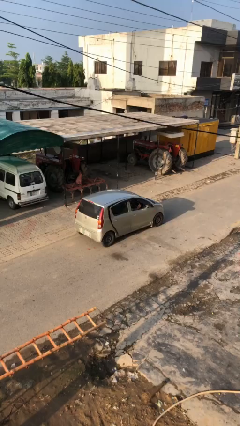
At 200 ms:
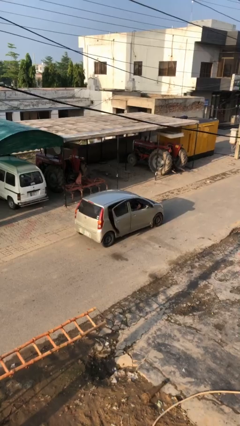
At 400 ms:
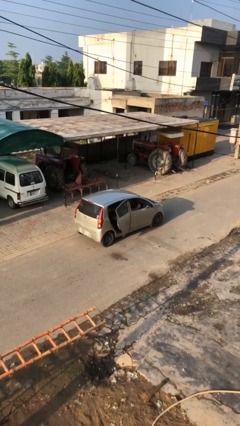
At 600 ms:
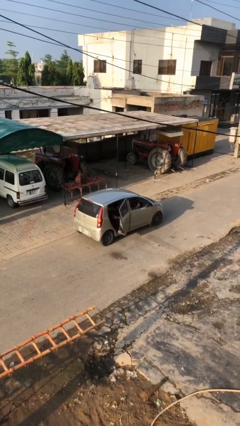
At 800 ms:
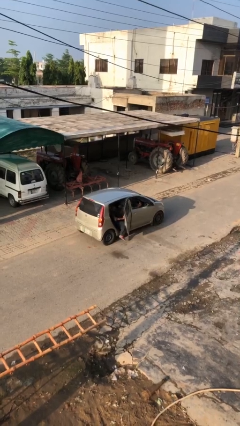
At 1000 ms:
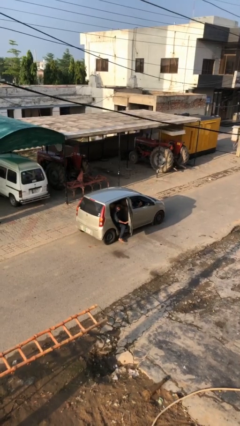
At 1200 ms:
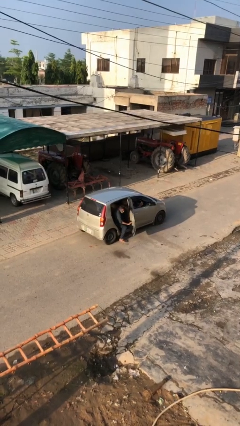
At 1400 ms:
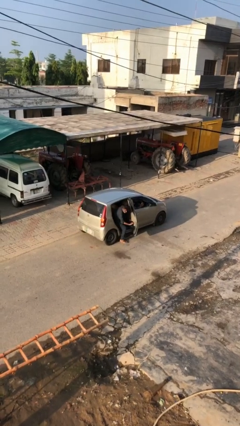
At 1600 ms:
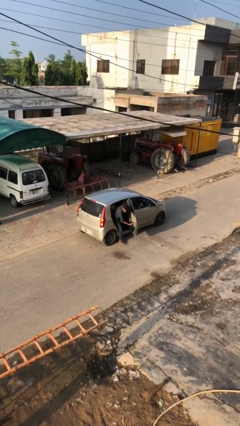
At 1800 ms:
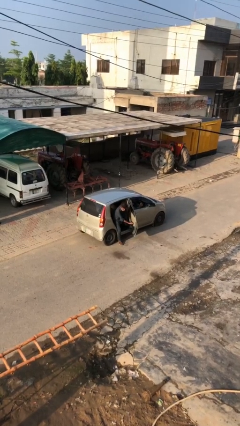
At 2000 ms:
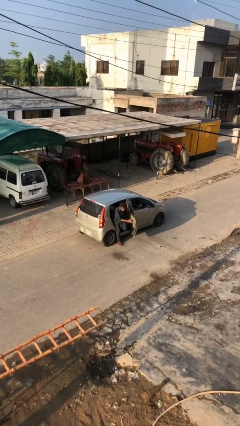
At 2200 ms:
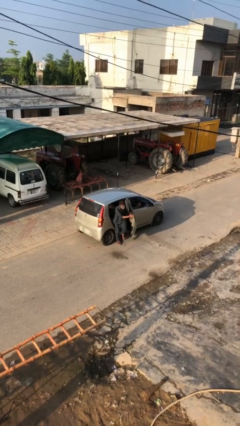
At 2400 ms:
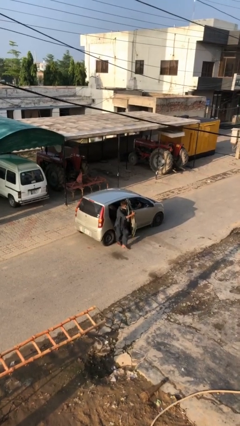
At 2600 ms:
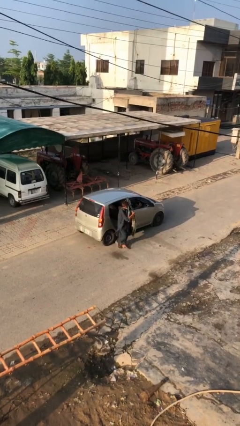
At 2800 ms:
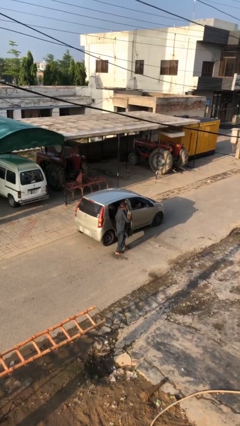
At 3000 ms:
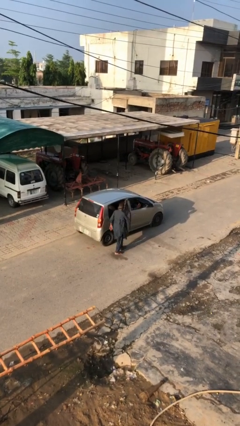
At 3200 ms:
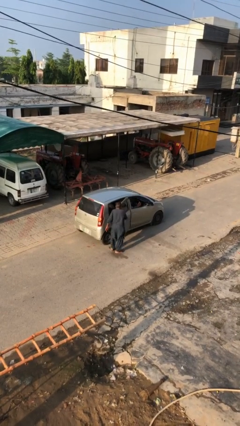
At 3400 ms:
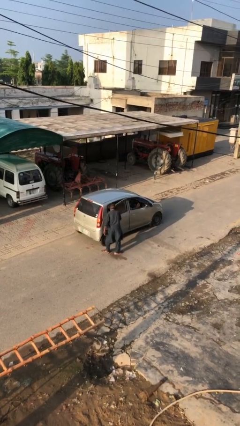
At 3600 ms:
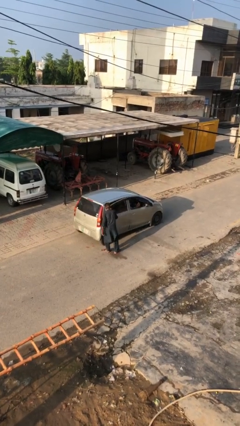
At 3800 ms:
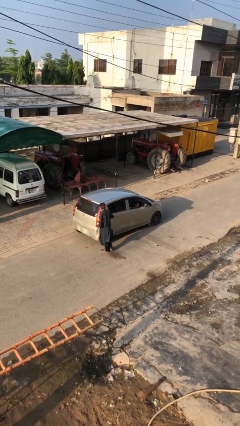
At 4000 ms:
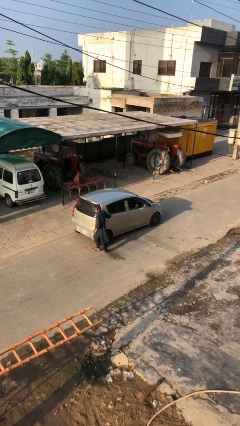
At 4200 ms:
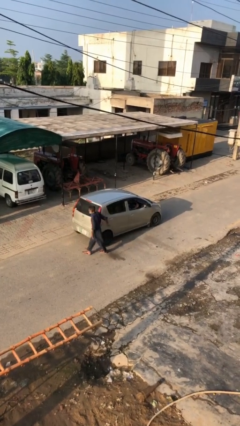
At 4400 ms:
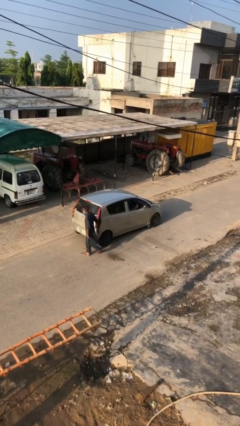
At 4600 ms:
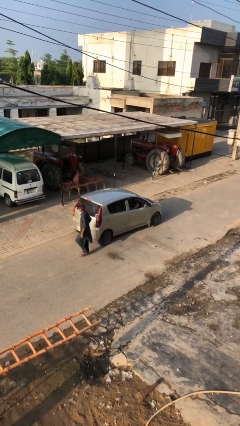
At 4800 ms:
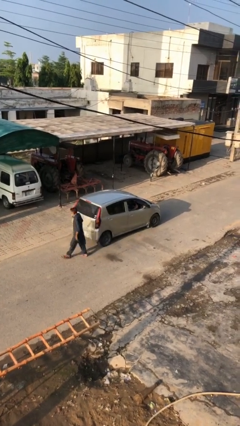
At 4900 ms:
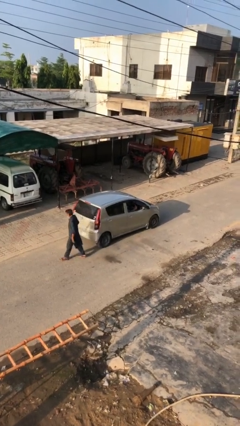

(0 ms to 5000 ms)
car drops off person

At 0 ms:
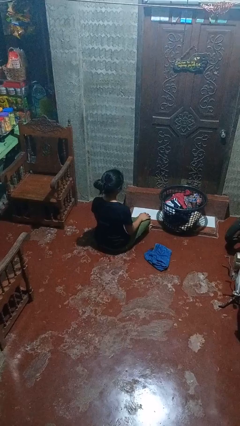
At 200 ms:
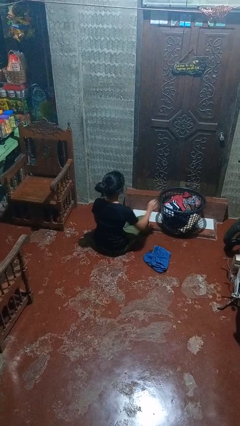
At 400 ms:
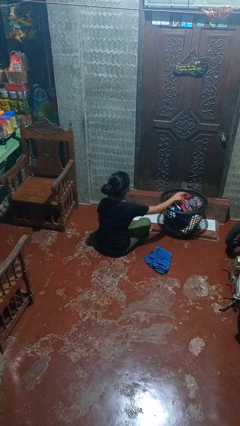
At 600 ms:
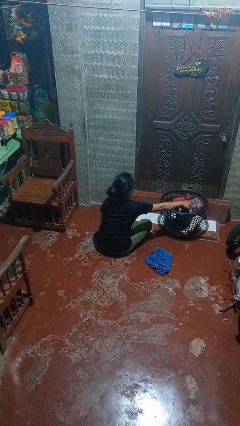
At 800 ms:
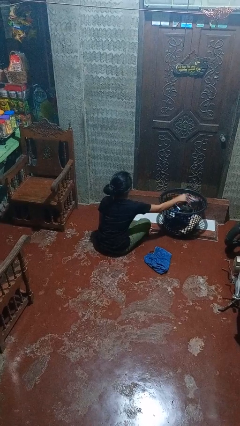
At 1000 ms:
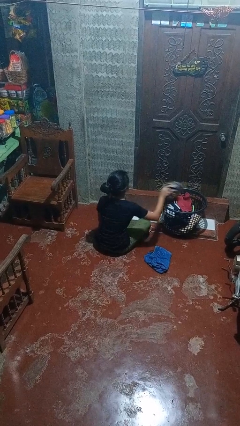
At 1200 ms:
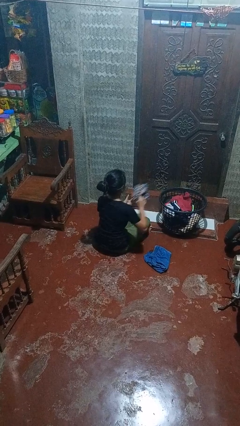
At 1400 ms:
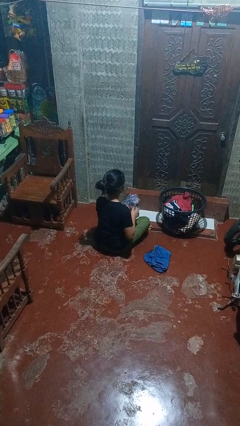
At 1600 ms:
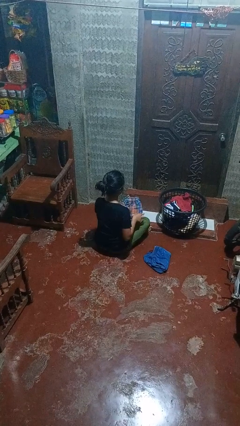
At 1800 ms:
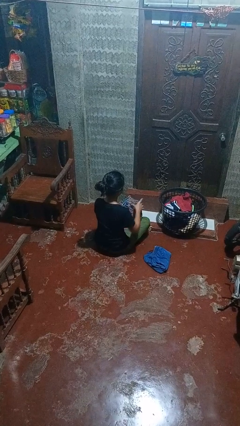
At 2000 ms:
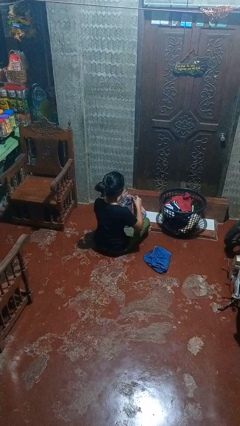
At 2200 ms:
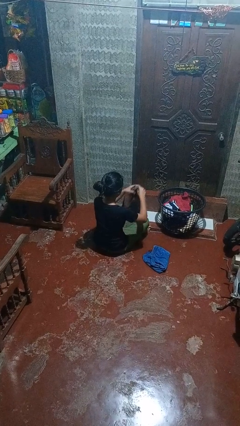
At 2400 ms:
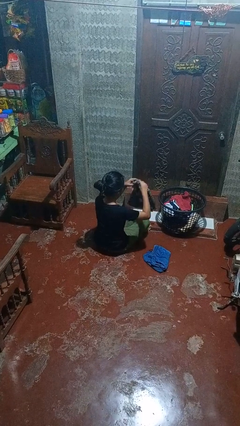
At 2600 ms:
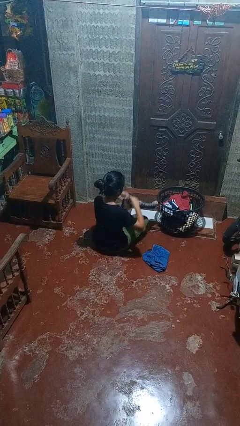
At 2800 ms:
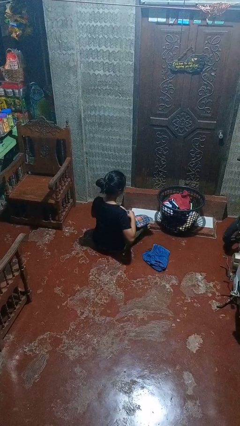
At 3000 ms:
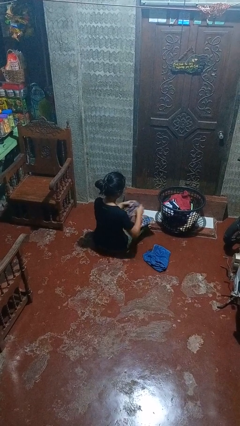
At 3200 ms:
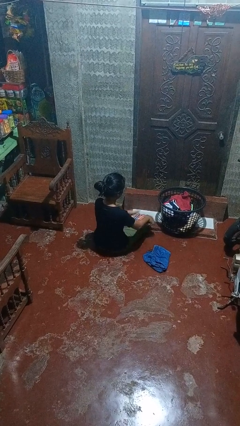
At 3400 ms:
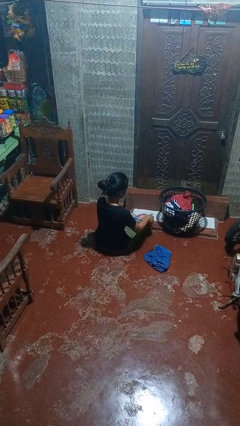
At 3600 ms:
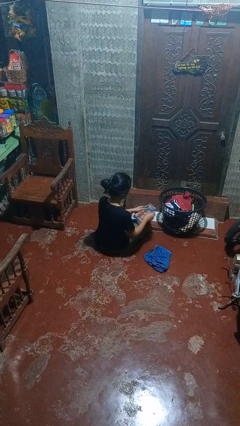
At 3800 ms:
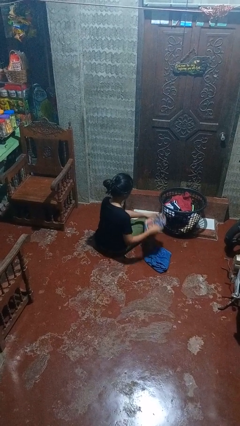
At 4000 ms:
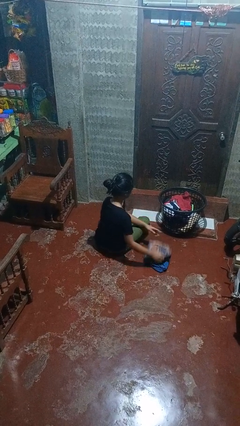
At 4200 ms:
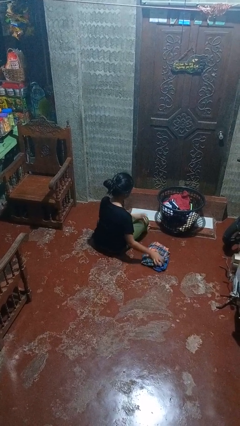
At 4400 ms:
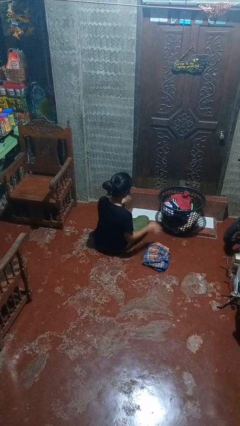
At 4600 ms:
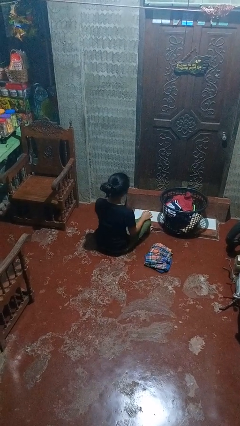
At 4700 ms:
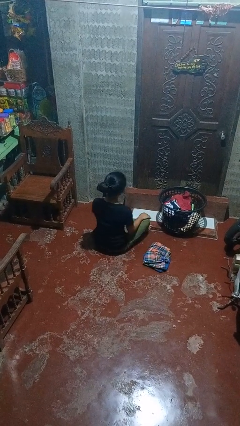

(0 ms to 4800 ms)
person folds pants

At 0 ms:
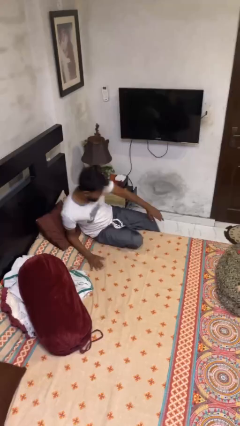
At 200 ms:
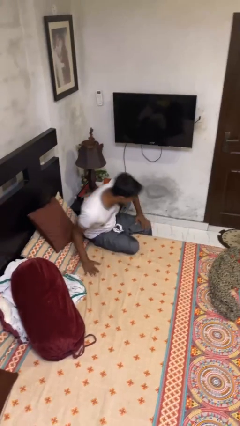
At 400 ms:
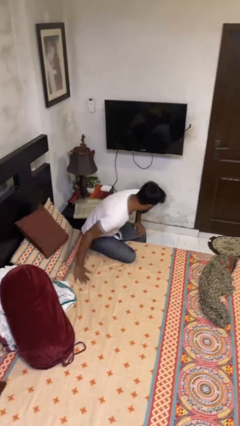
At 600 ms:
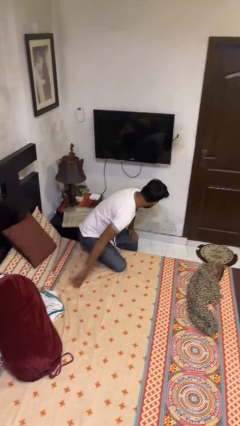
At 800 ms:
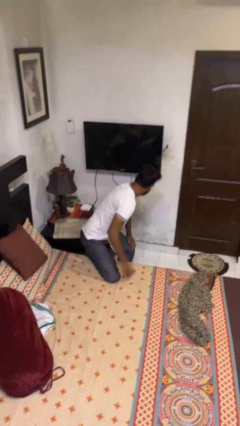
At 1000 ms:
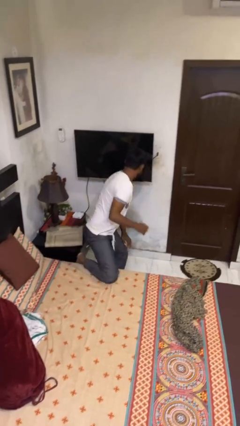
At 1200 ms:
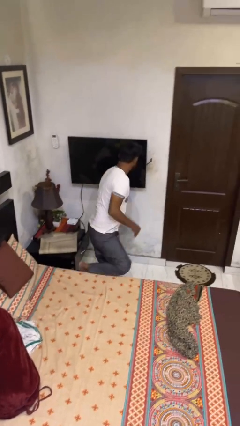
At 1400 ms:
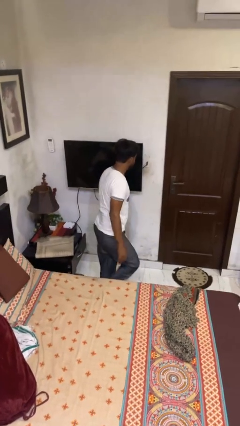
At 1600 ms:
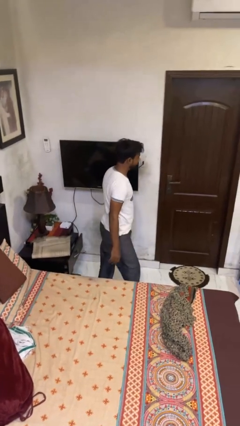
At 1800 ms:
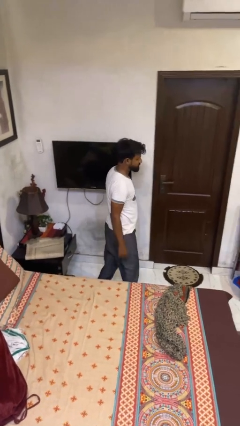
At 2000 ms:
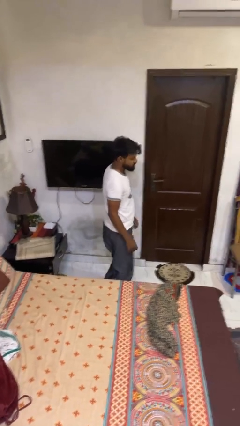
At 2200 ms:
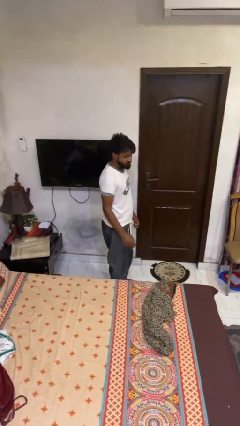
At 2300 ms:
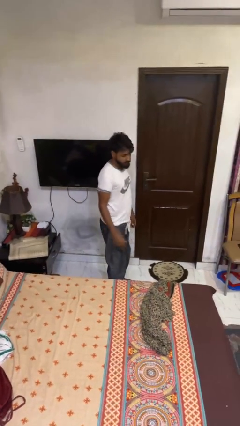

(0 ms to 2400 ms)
person stands up

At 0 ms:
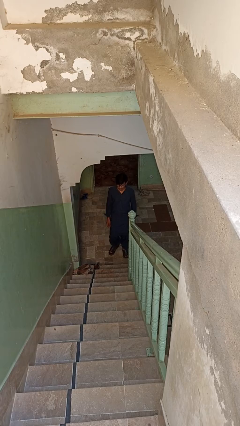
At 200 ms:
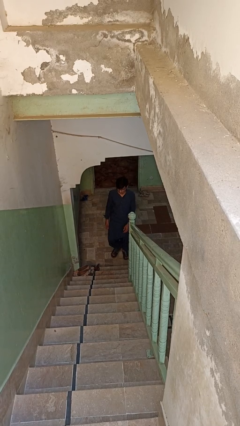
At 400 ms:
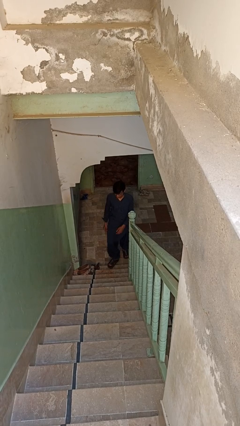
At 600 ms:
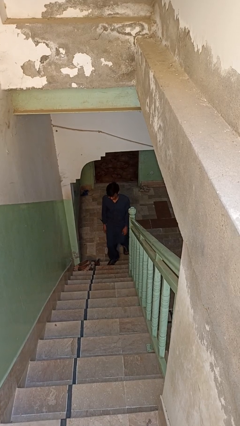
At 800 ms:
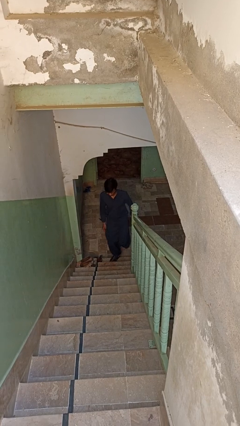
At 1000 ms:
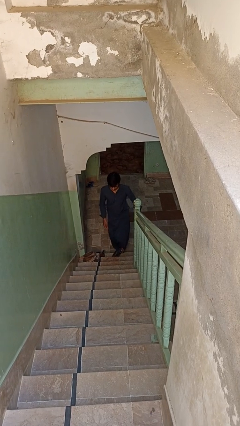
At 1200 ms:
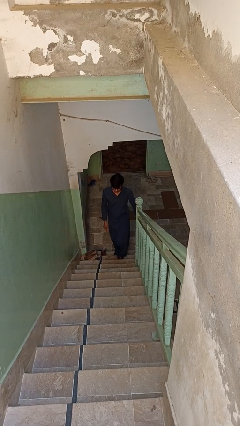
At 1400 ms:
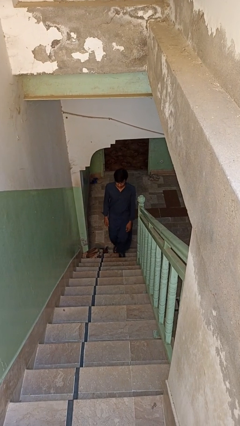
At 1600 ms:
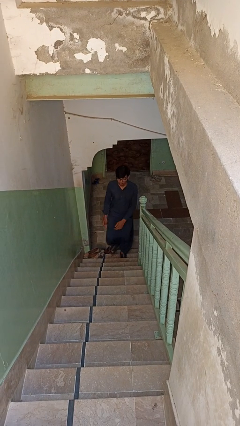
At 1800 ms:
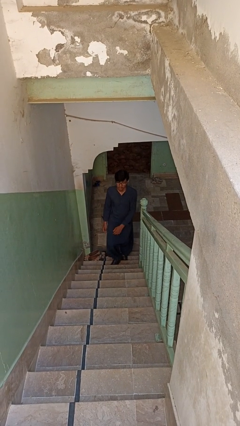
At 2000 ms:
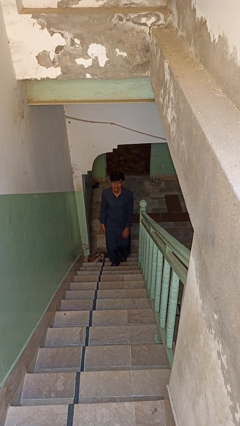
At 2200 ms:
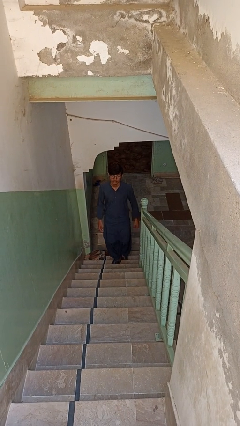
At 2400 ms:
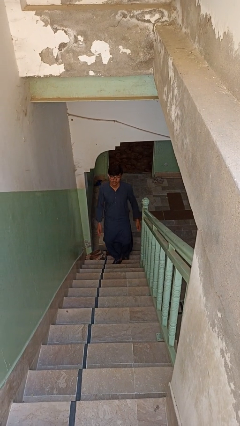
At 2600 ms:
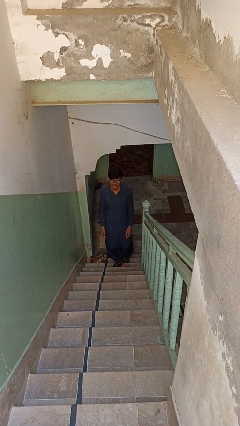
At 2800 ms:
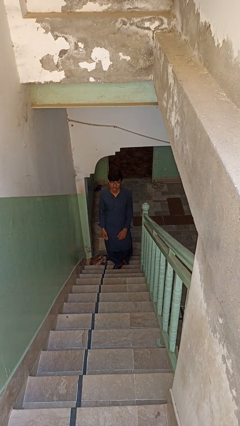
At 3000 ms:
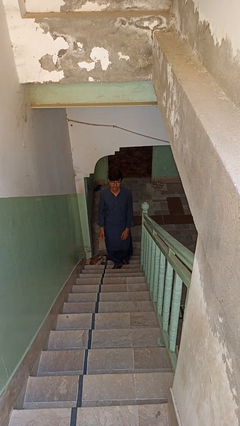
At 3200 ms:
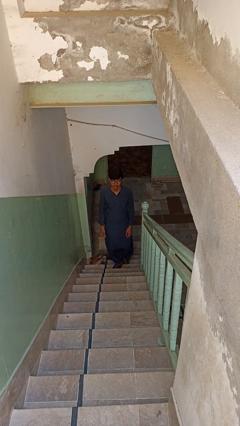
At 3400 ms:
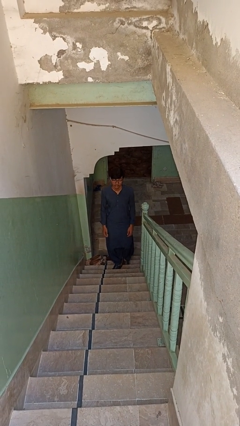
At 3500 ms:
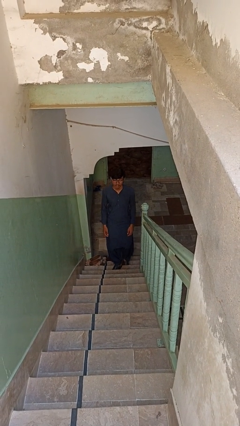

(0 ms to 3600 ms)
person climbs up stairs

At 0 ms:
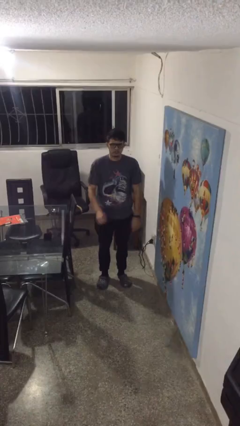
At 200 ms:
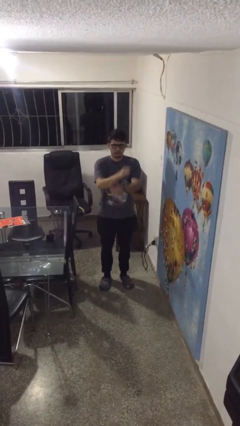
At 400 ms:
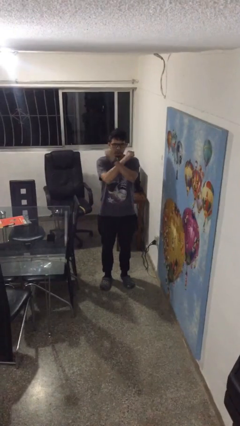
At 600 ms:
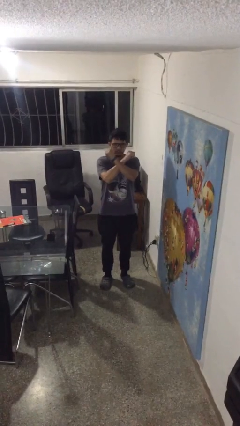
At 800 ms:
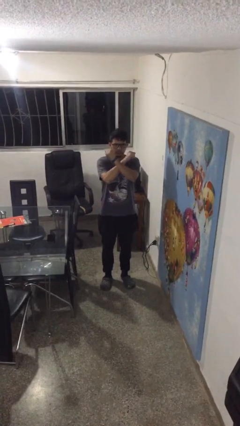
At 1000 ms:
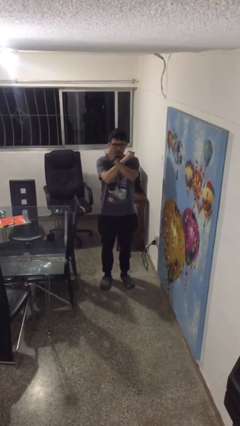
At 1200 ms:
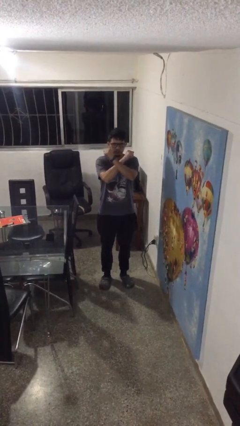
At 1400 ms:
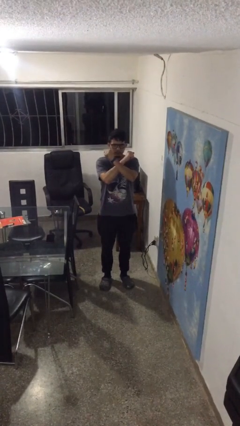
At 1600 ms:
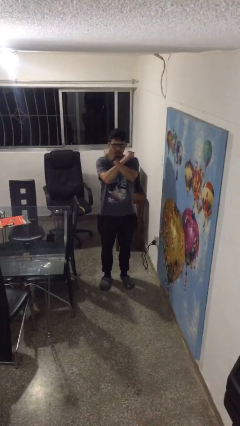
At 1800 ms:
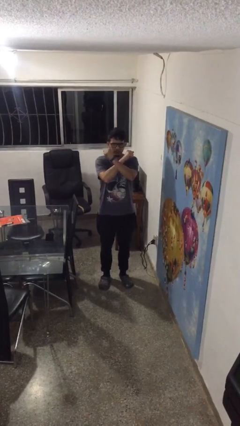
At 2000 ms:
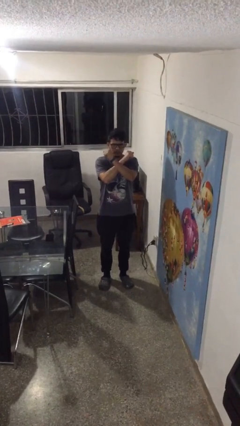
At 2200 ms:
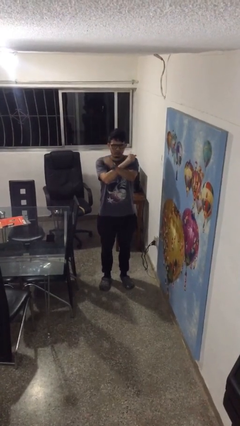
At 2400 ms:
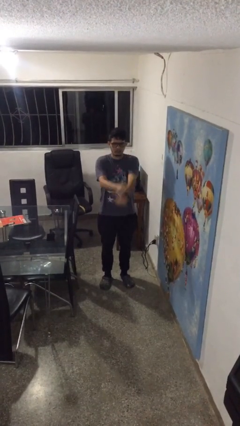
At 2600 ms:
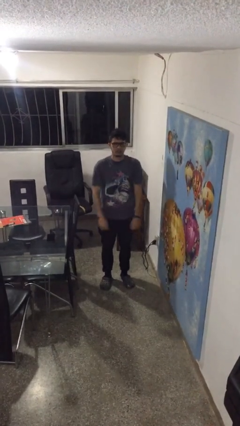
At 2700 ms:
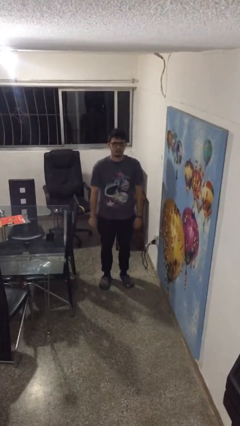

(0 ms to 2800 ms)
person gestures arms x